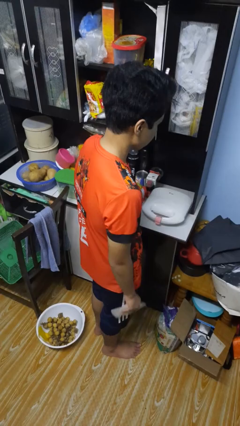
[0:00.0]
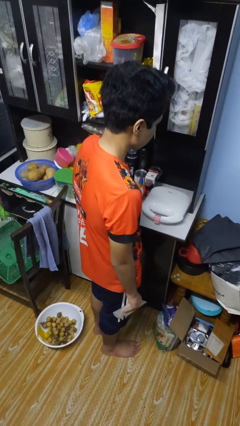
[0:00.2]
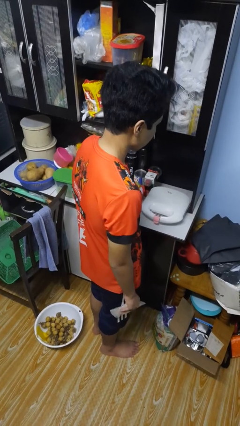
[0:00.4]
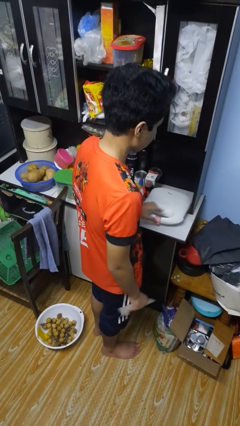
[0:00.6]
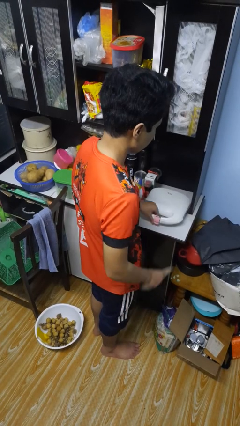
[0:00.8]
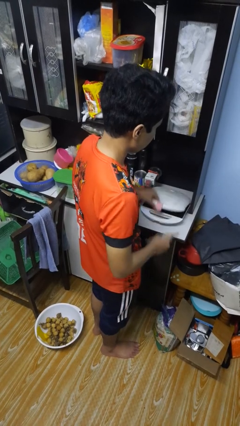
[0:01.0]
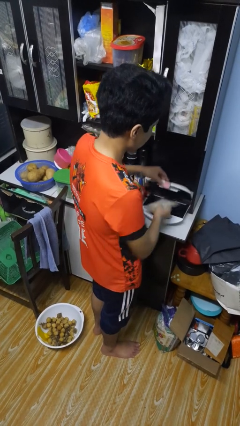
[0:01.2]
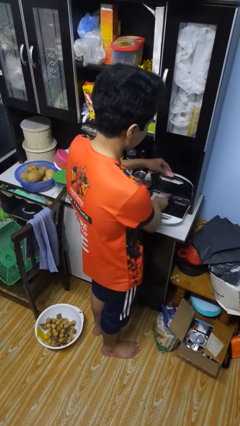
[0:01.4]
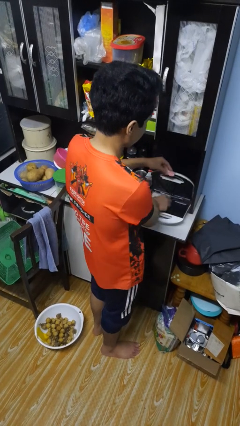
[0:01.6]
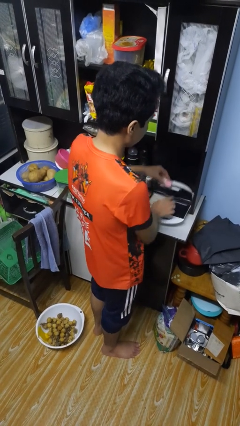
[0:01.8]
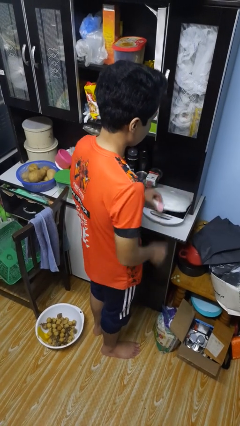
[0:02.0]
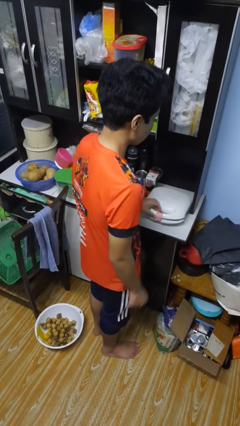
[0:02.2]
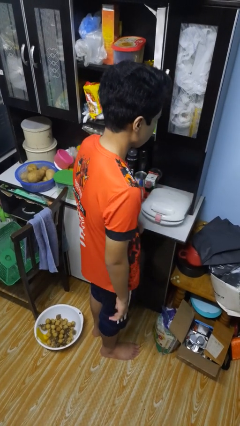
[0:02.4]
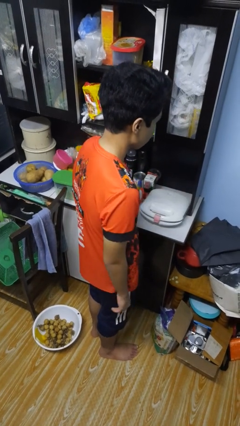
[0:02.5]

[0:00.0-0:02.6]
person puts object into toaster

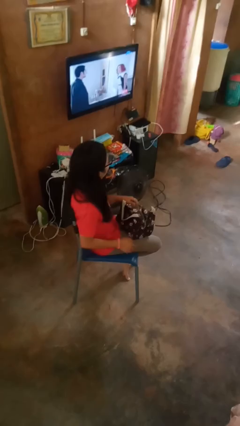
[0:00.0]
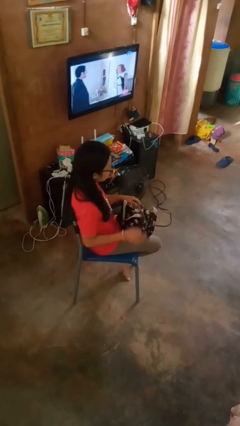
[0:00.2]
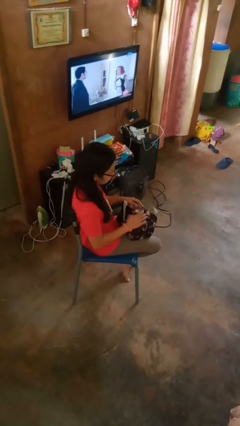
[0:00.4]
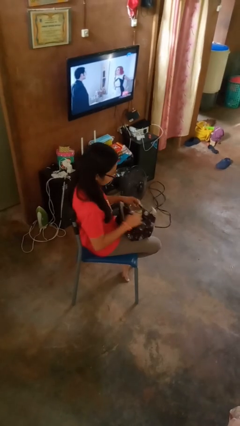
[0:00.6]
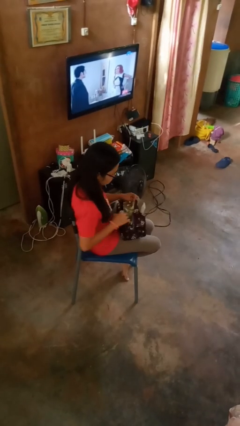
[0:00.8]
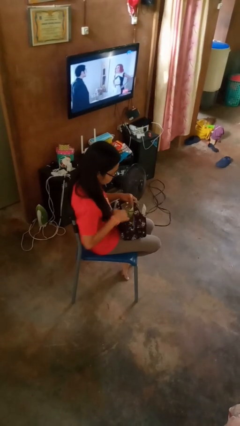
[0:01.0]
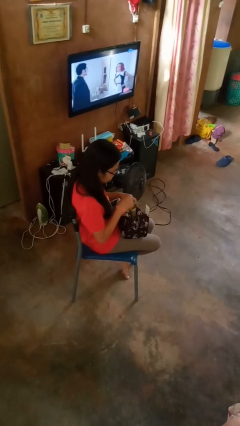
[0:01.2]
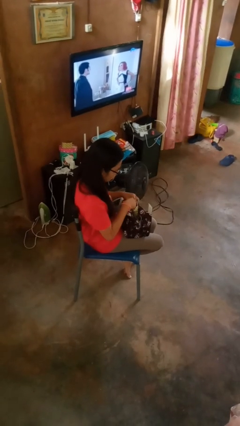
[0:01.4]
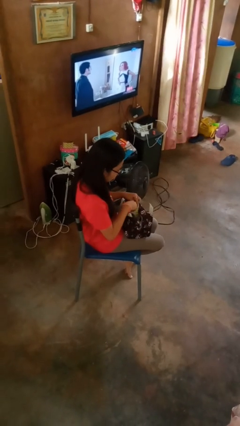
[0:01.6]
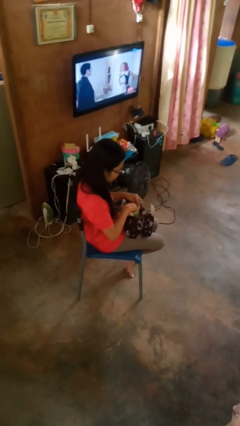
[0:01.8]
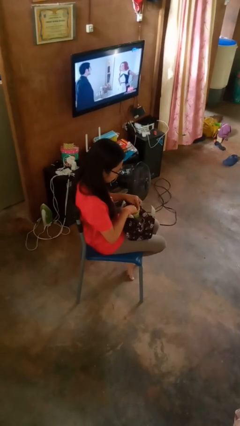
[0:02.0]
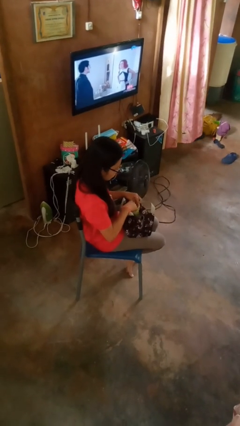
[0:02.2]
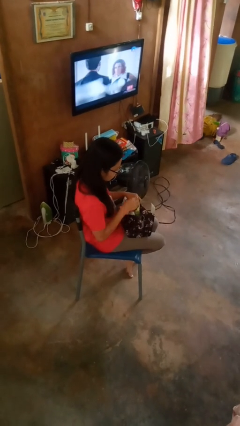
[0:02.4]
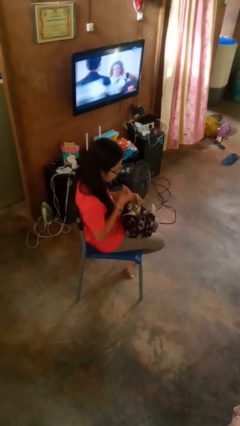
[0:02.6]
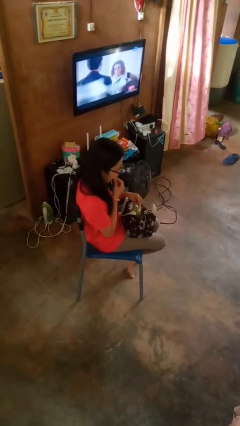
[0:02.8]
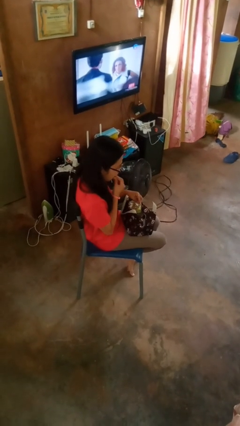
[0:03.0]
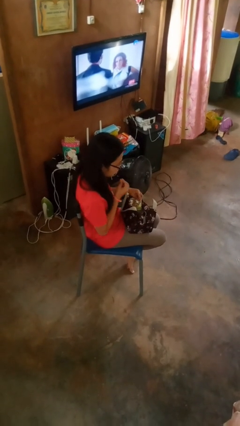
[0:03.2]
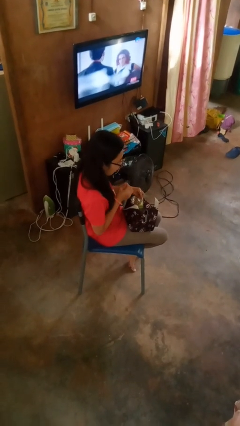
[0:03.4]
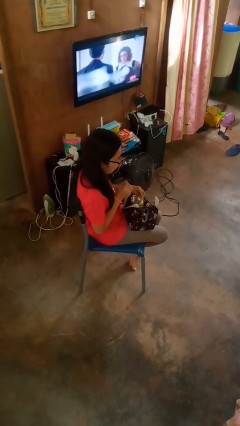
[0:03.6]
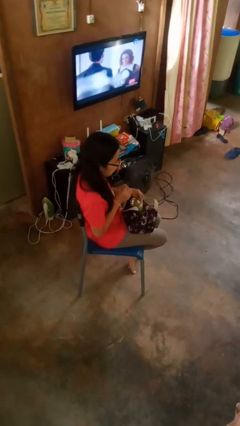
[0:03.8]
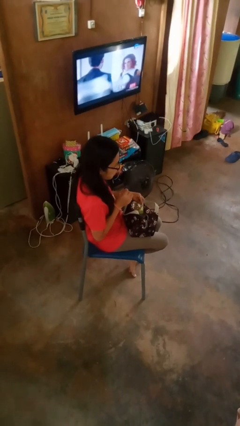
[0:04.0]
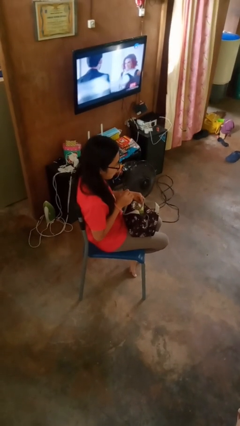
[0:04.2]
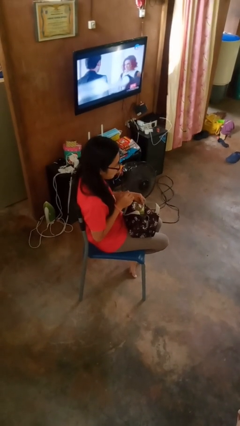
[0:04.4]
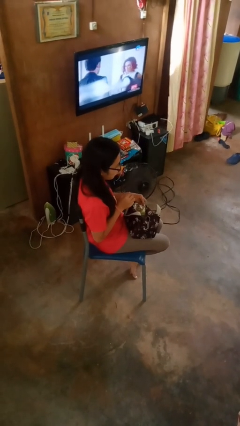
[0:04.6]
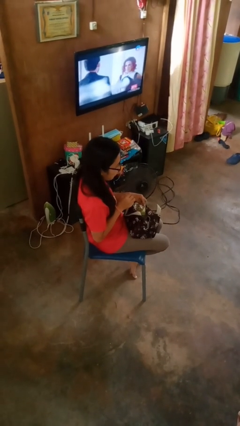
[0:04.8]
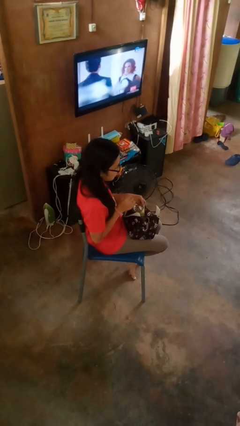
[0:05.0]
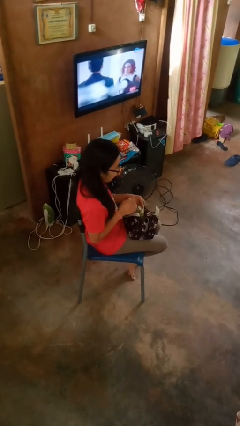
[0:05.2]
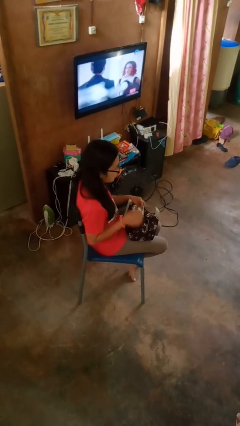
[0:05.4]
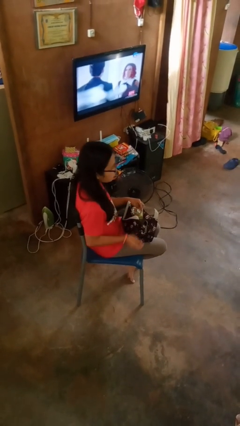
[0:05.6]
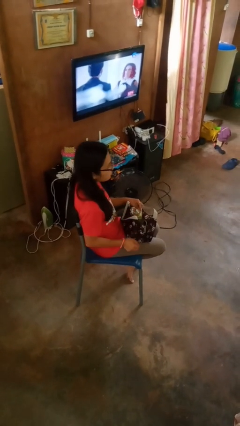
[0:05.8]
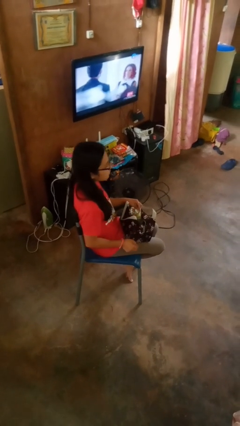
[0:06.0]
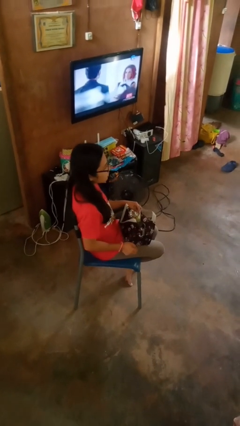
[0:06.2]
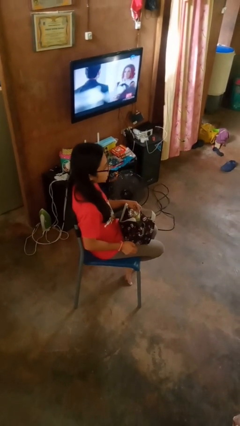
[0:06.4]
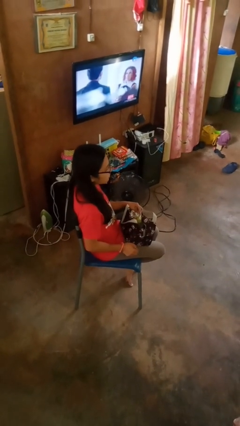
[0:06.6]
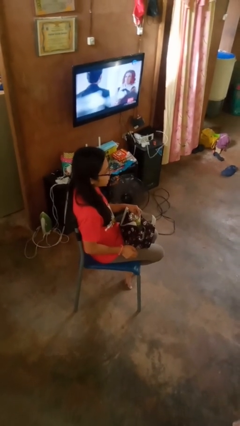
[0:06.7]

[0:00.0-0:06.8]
person eats snack from bag

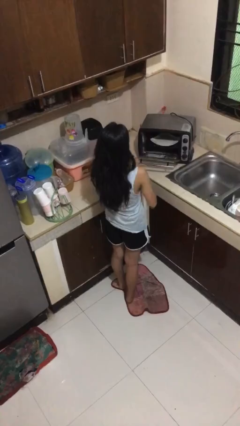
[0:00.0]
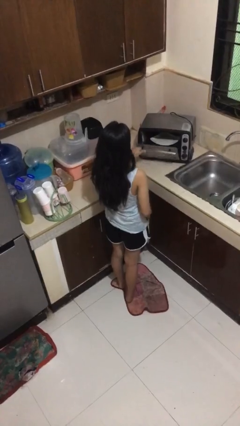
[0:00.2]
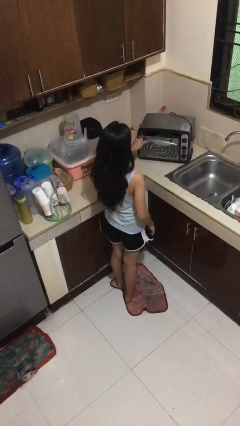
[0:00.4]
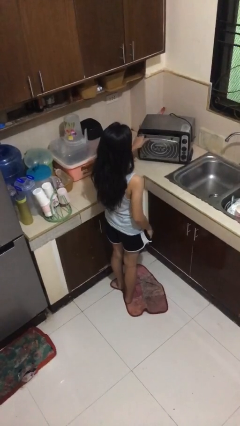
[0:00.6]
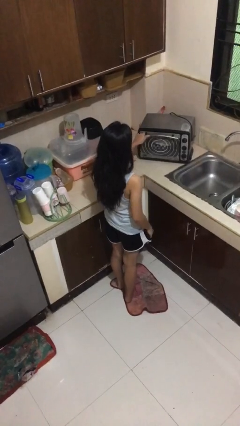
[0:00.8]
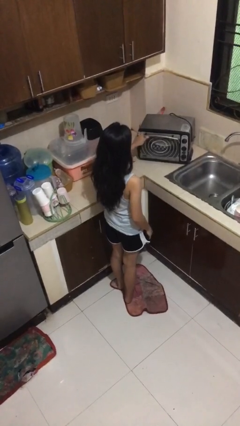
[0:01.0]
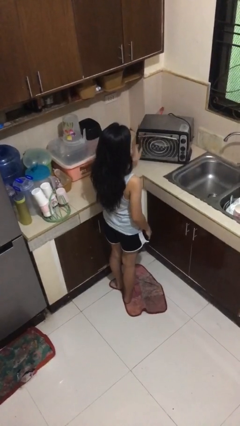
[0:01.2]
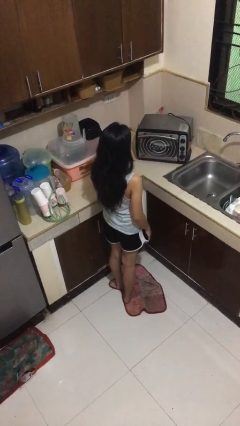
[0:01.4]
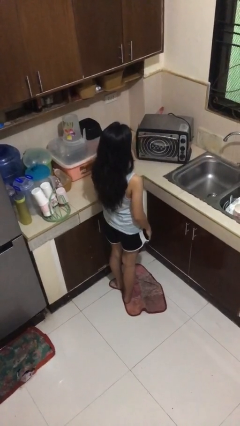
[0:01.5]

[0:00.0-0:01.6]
person closes microwave

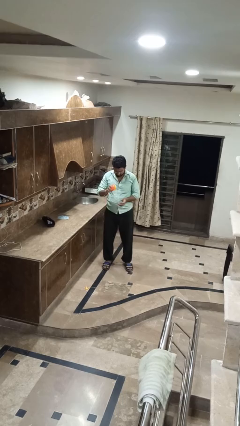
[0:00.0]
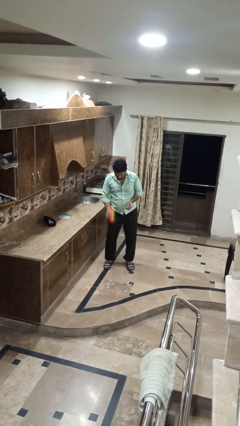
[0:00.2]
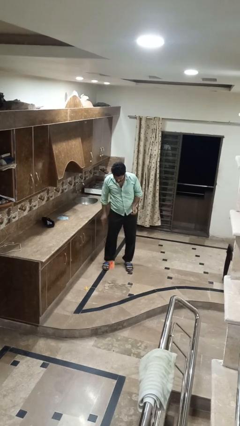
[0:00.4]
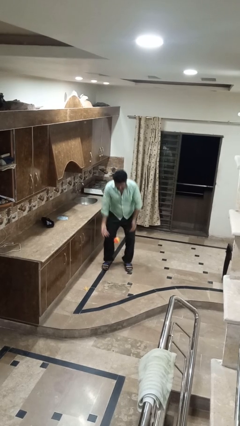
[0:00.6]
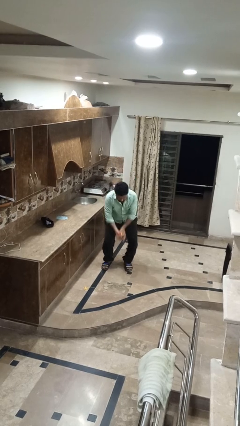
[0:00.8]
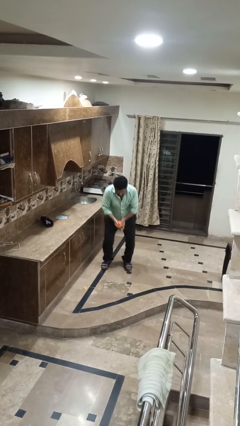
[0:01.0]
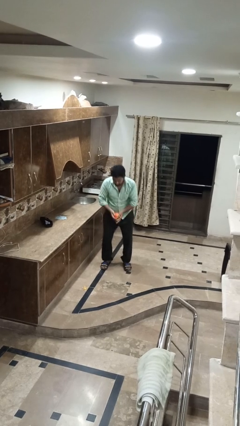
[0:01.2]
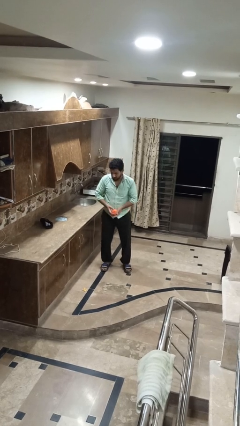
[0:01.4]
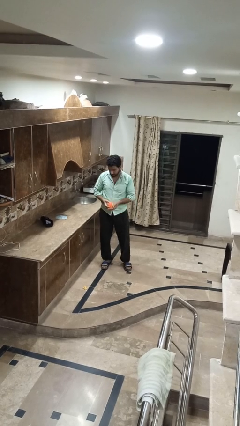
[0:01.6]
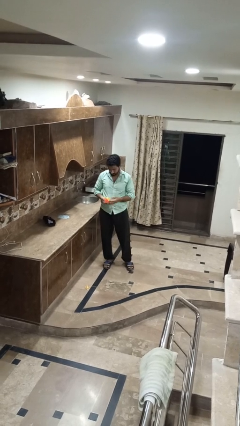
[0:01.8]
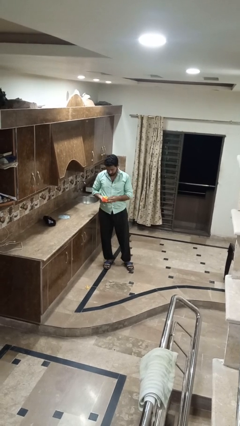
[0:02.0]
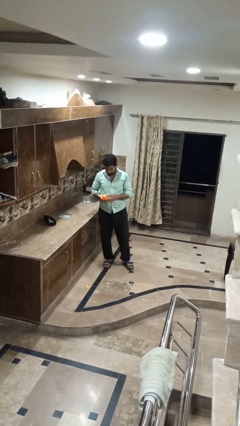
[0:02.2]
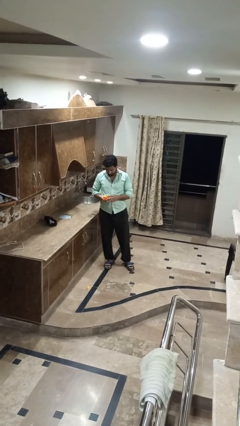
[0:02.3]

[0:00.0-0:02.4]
person bounces ball on floor

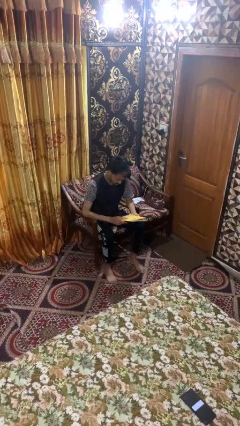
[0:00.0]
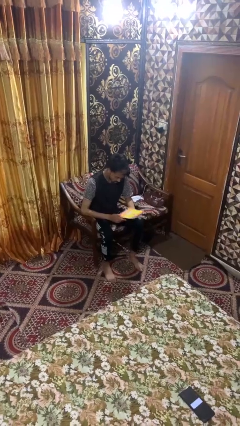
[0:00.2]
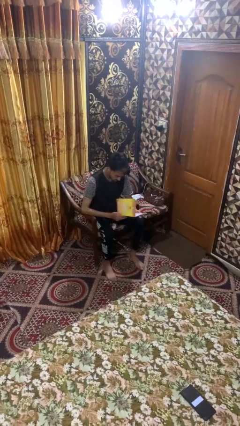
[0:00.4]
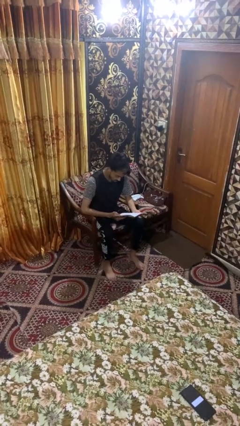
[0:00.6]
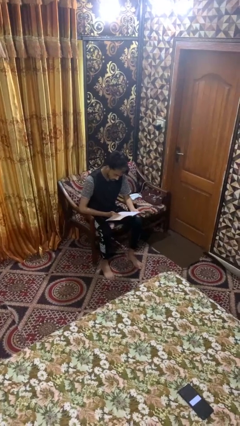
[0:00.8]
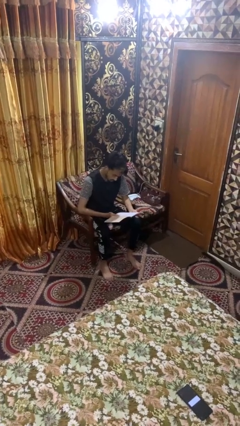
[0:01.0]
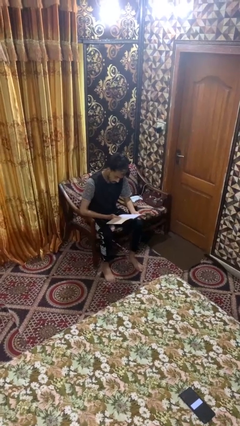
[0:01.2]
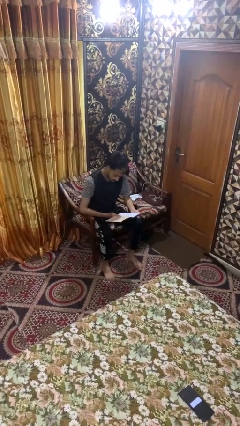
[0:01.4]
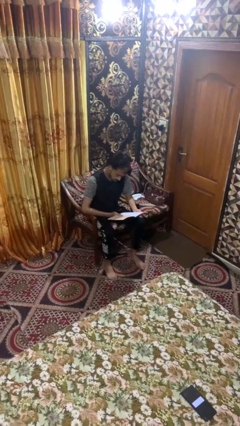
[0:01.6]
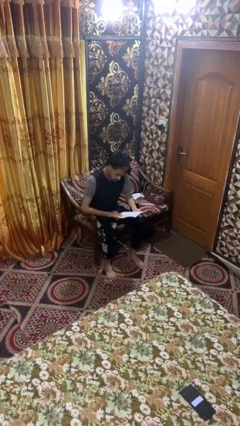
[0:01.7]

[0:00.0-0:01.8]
person reads magazine

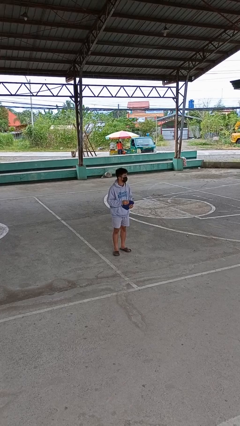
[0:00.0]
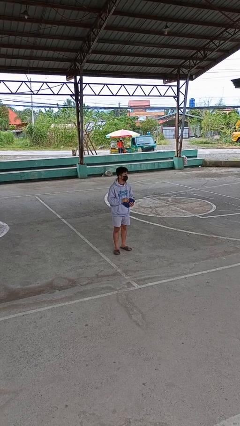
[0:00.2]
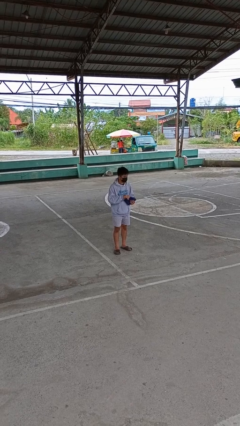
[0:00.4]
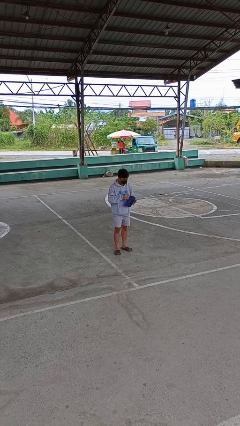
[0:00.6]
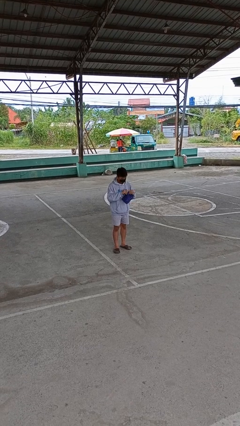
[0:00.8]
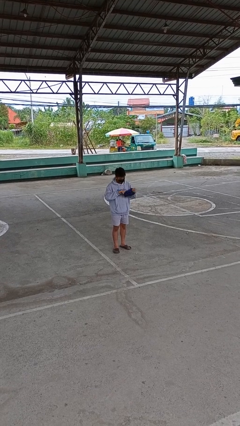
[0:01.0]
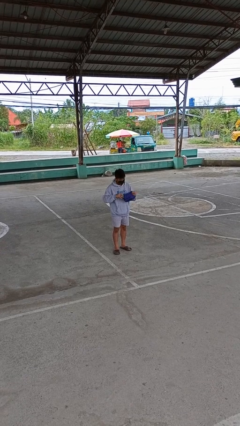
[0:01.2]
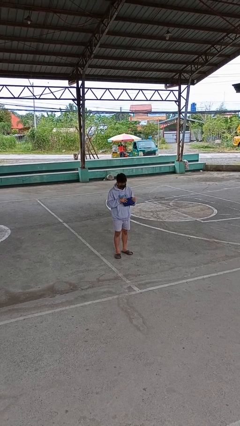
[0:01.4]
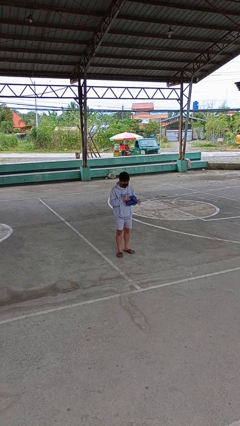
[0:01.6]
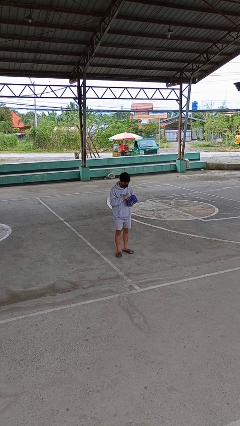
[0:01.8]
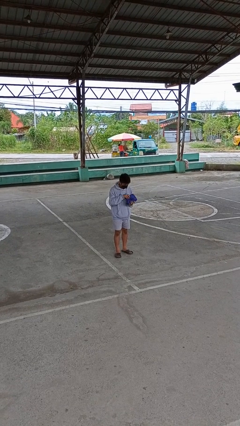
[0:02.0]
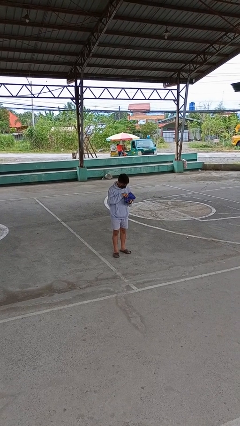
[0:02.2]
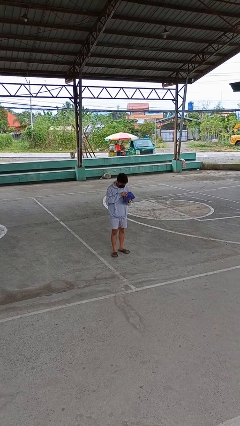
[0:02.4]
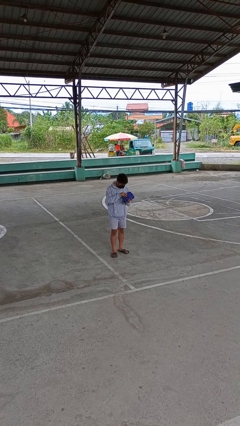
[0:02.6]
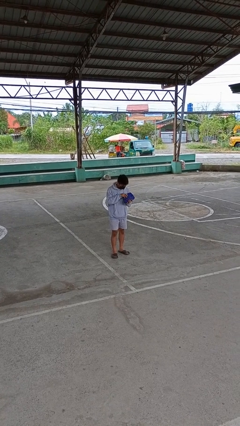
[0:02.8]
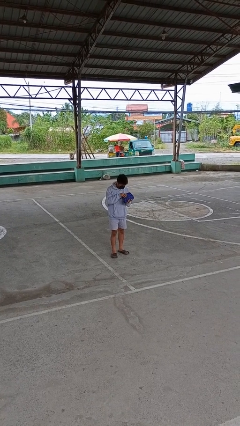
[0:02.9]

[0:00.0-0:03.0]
person searches in purse
